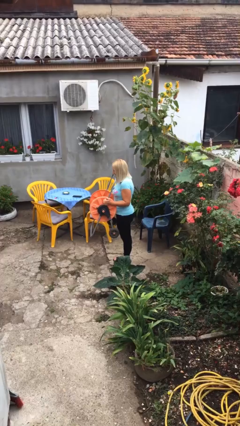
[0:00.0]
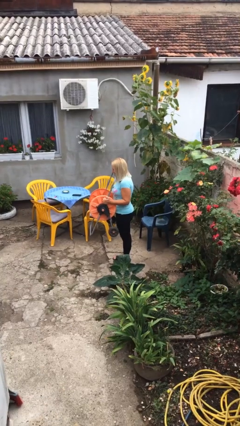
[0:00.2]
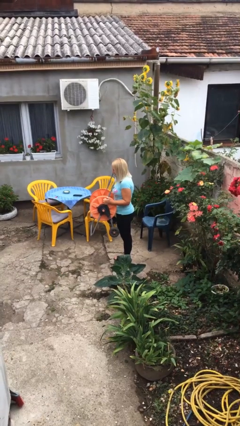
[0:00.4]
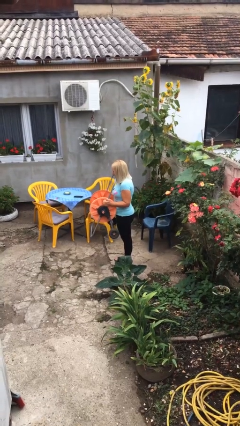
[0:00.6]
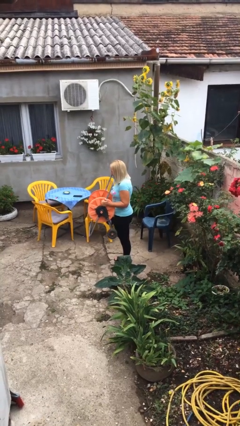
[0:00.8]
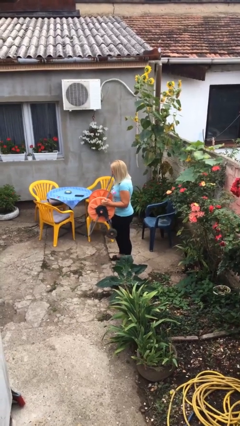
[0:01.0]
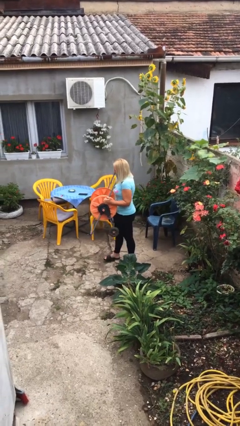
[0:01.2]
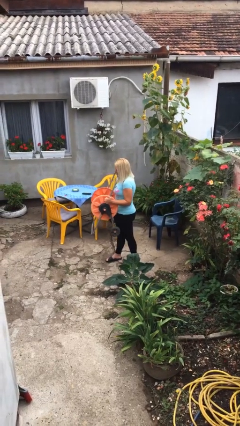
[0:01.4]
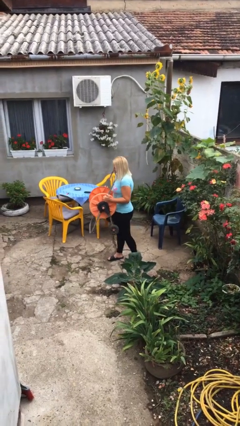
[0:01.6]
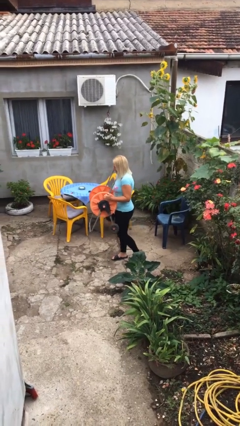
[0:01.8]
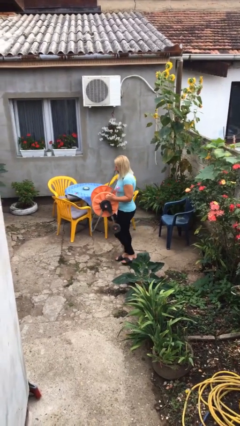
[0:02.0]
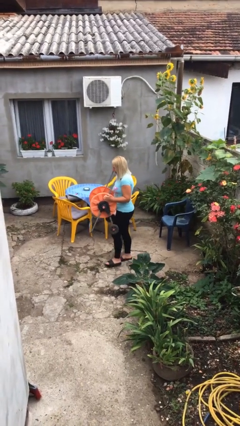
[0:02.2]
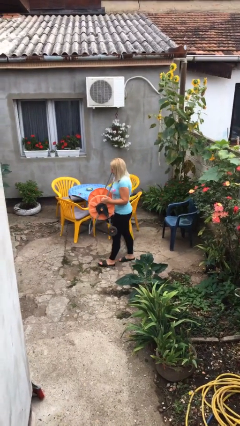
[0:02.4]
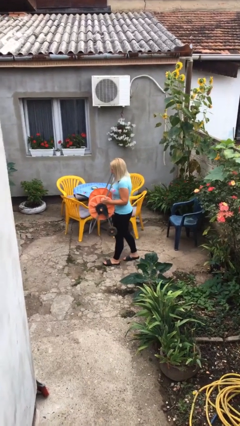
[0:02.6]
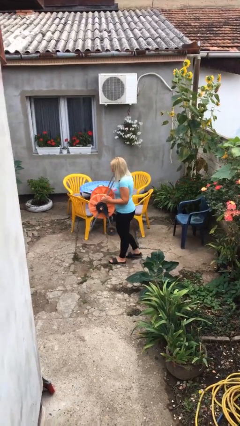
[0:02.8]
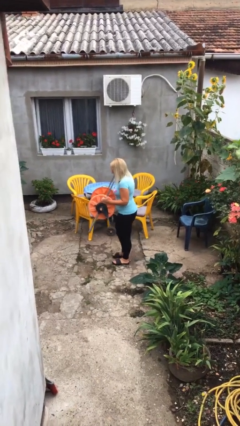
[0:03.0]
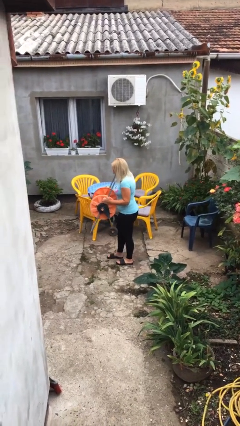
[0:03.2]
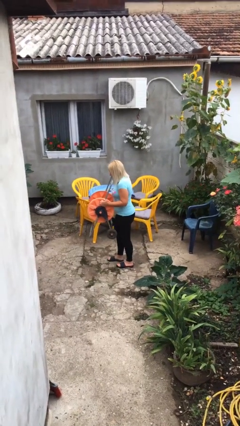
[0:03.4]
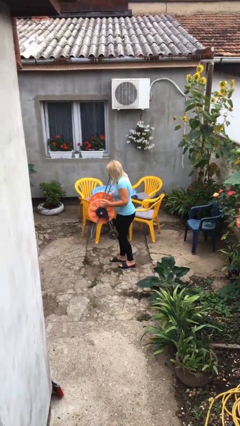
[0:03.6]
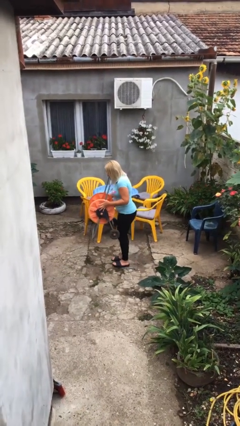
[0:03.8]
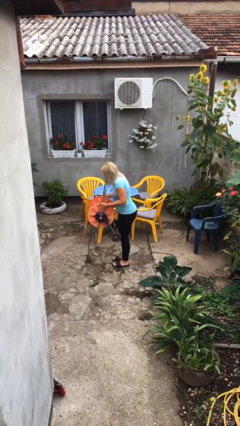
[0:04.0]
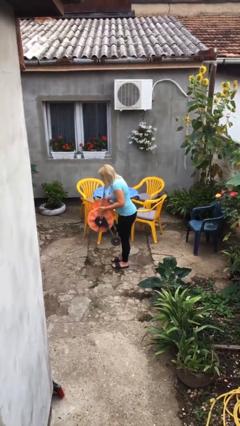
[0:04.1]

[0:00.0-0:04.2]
person carries heavy object

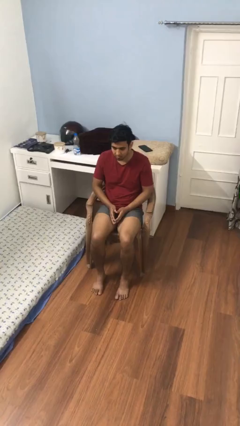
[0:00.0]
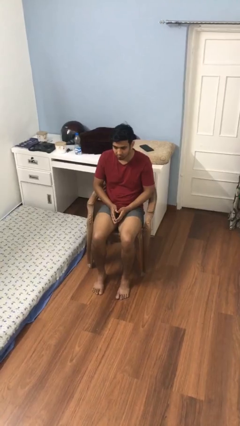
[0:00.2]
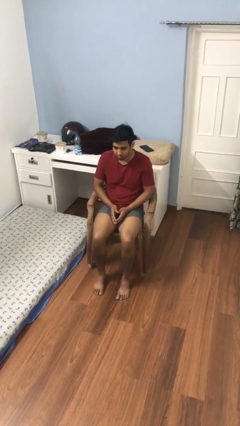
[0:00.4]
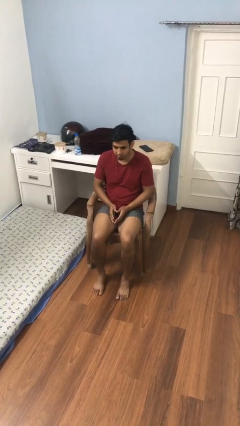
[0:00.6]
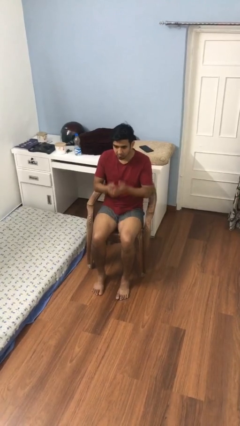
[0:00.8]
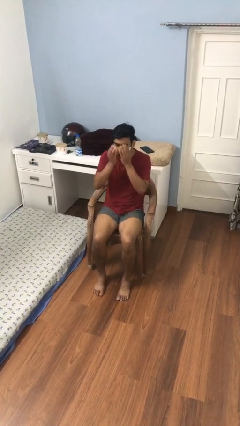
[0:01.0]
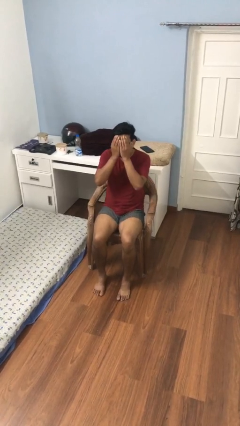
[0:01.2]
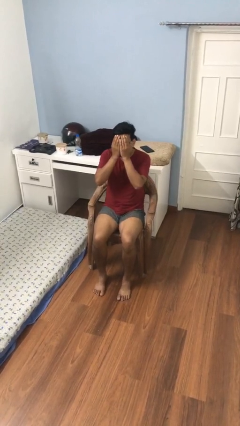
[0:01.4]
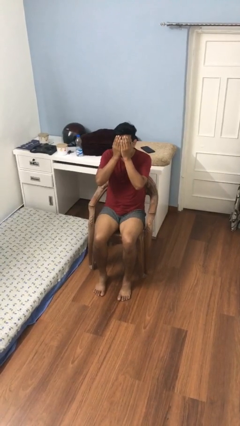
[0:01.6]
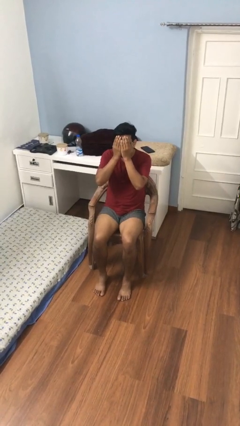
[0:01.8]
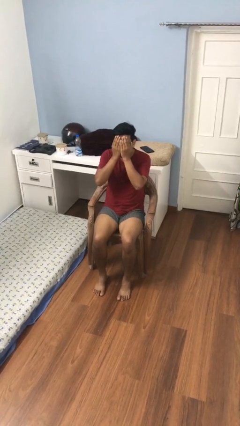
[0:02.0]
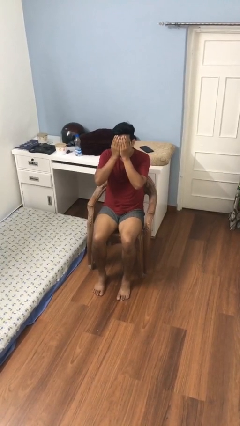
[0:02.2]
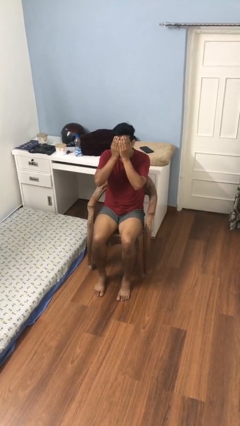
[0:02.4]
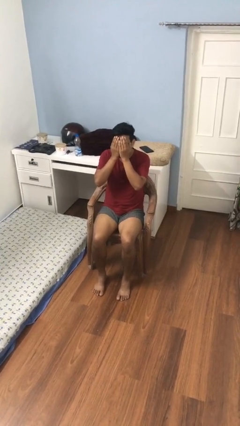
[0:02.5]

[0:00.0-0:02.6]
person covers face with hands

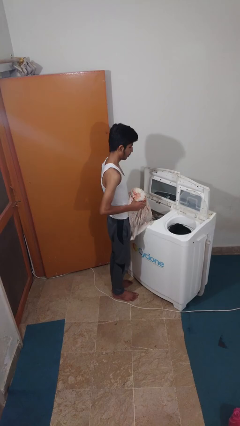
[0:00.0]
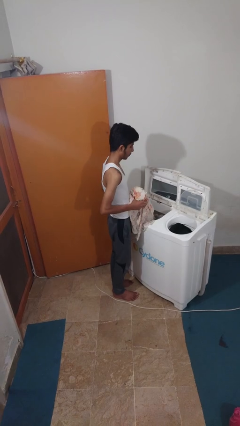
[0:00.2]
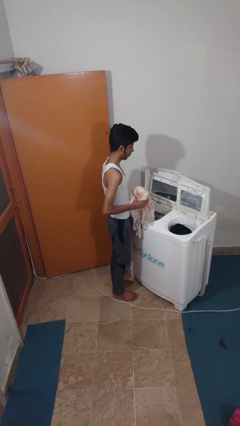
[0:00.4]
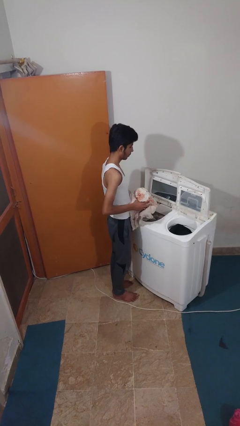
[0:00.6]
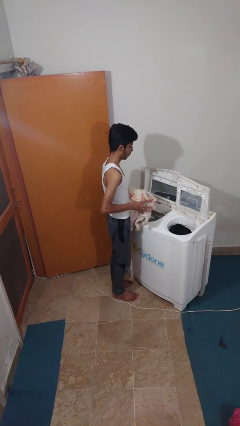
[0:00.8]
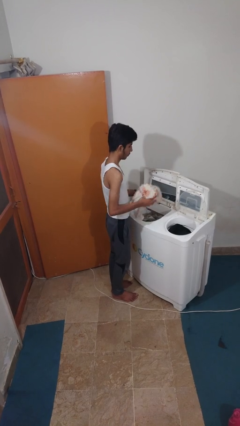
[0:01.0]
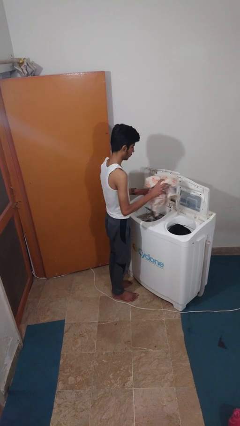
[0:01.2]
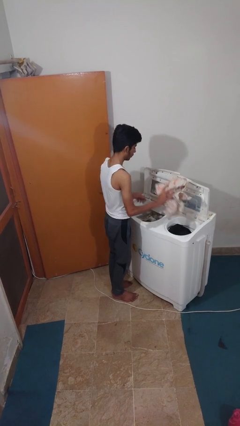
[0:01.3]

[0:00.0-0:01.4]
person loads dryer

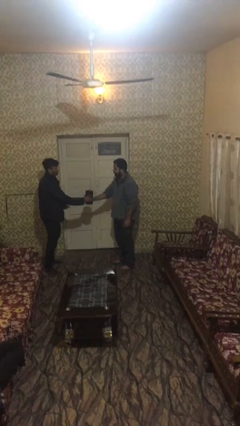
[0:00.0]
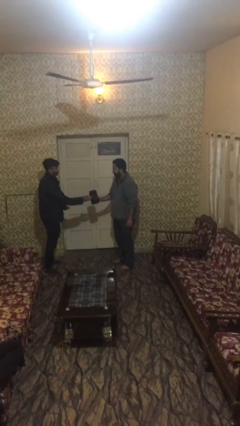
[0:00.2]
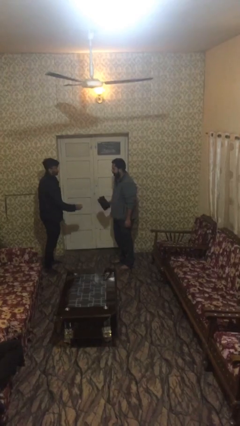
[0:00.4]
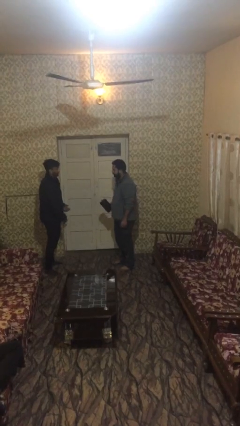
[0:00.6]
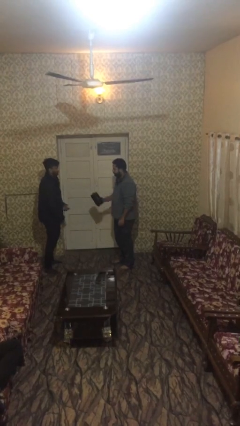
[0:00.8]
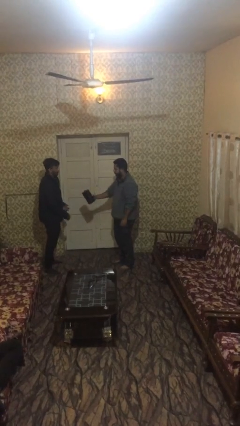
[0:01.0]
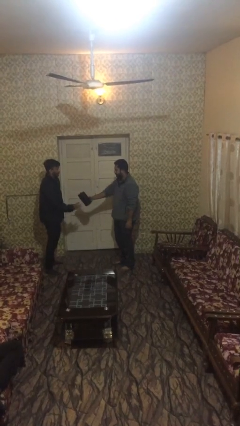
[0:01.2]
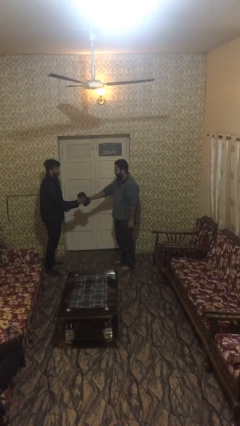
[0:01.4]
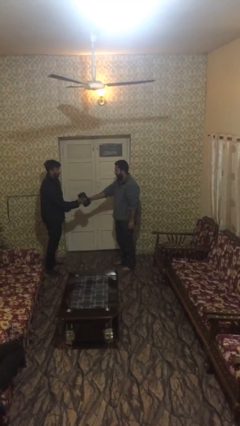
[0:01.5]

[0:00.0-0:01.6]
person transfers object to person

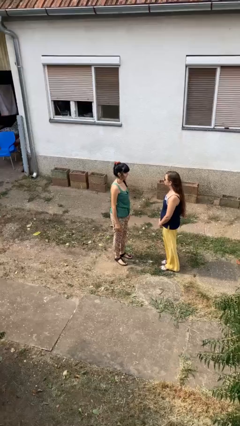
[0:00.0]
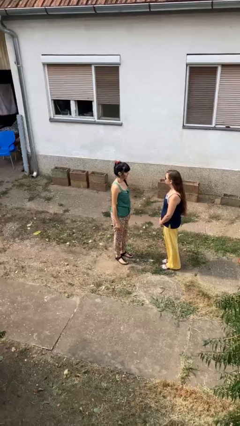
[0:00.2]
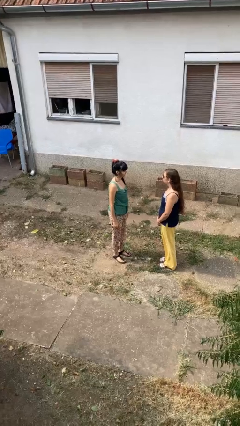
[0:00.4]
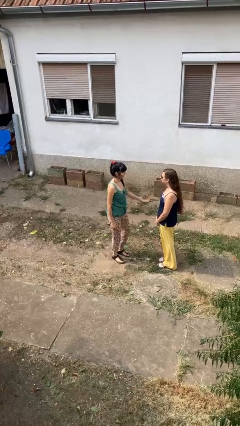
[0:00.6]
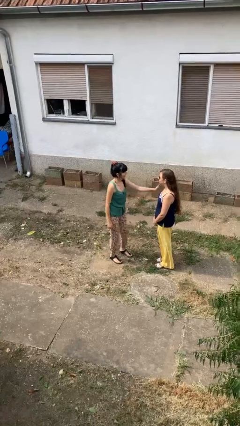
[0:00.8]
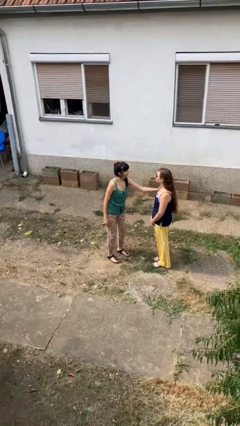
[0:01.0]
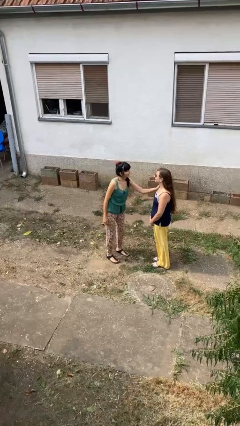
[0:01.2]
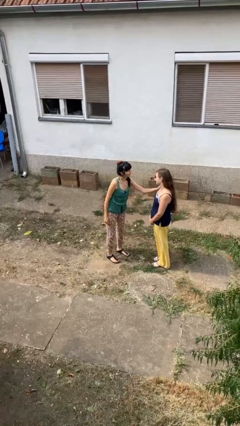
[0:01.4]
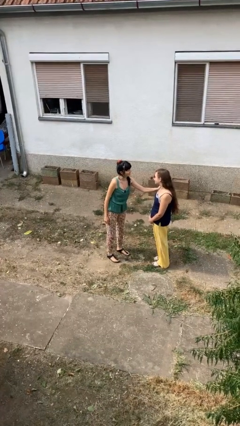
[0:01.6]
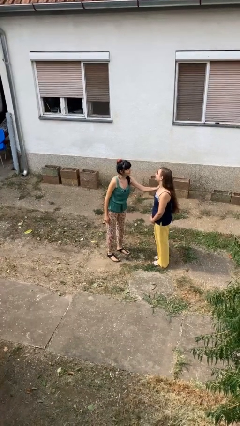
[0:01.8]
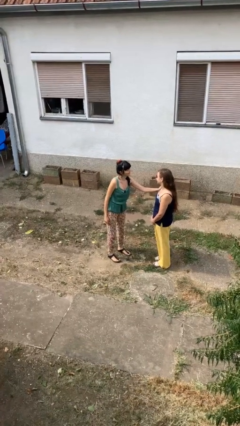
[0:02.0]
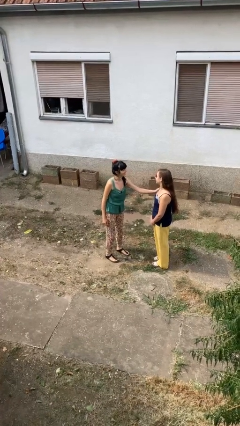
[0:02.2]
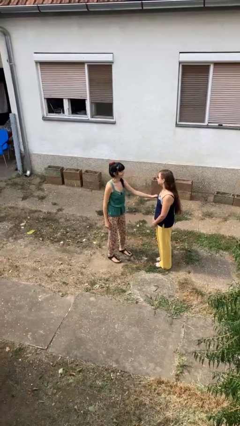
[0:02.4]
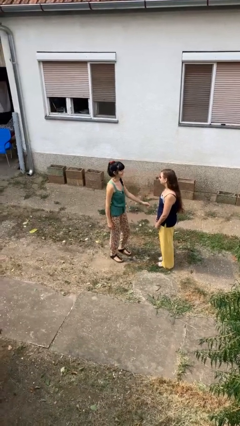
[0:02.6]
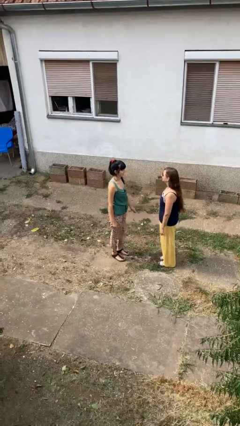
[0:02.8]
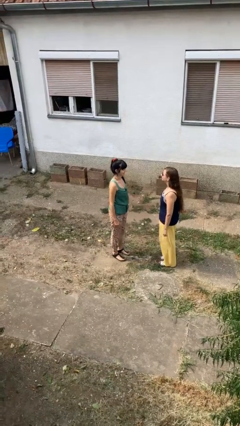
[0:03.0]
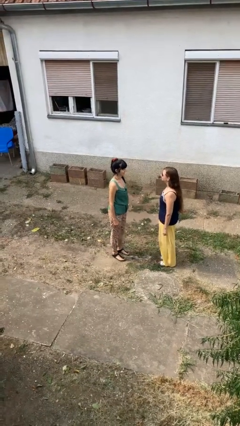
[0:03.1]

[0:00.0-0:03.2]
person pounds shoulders of person

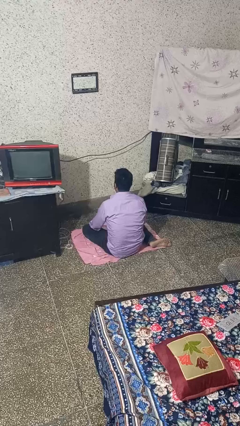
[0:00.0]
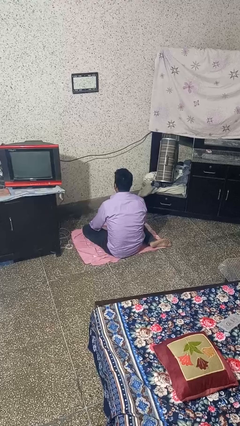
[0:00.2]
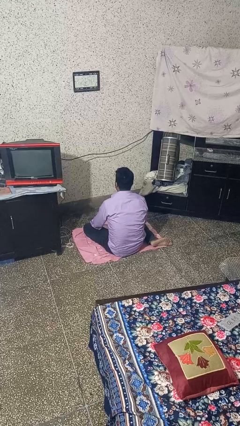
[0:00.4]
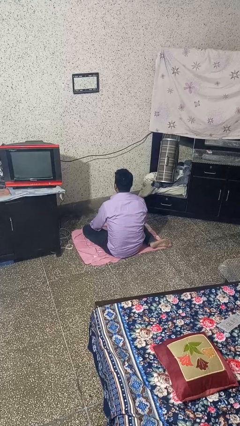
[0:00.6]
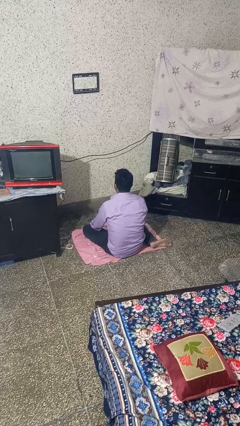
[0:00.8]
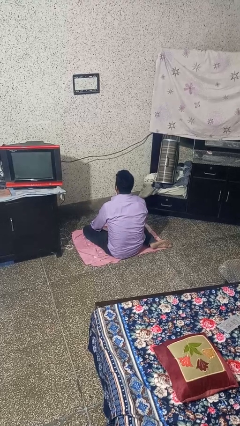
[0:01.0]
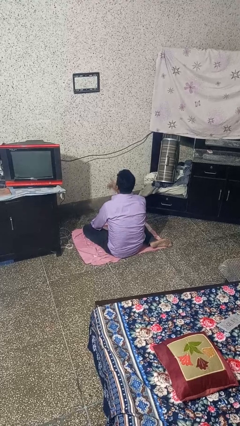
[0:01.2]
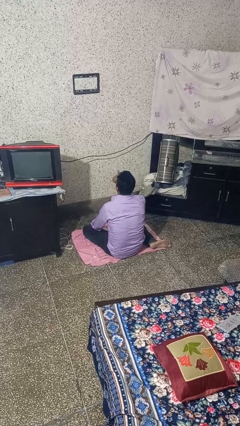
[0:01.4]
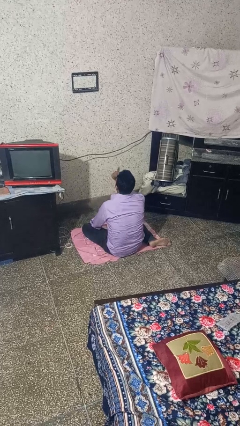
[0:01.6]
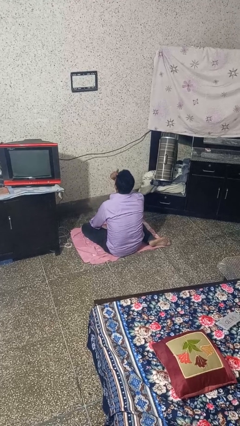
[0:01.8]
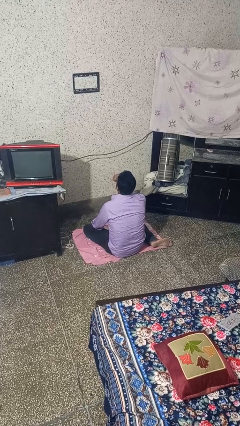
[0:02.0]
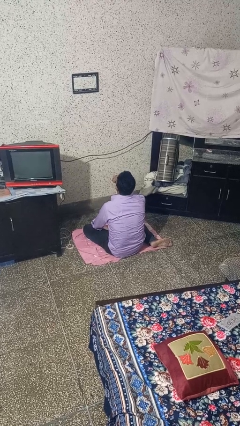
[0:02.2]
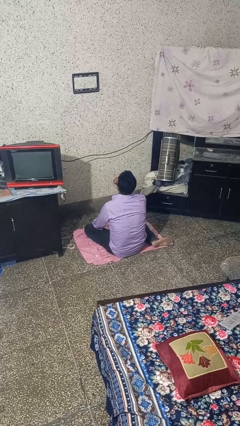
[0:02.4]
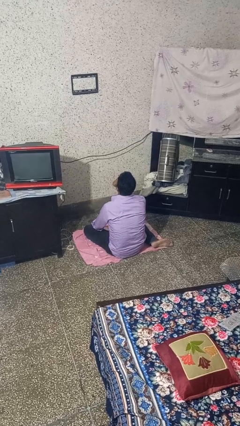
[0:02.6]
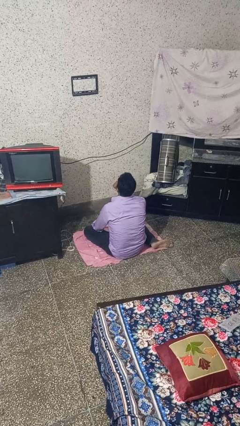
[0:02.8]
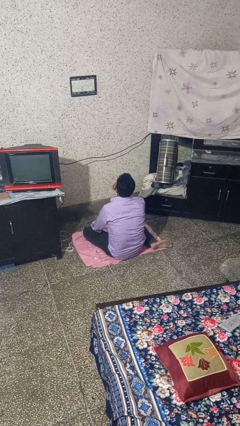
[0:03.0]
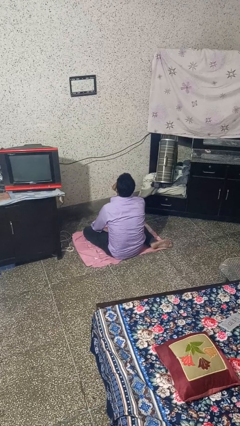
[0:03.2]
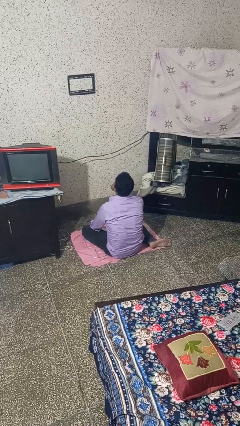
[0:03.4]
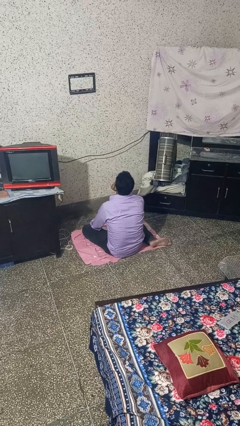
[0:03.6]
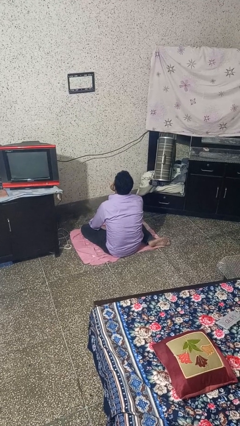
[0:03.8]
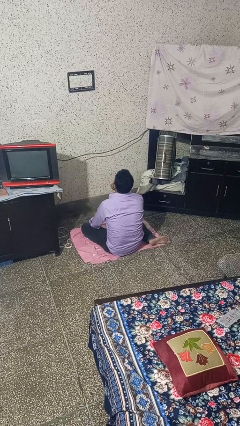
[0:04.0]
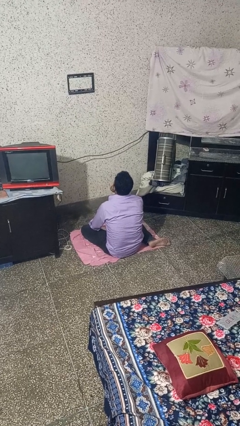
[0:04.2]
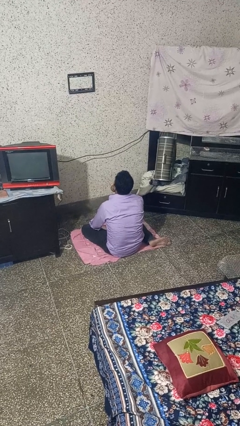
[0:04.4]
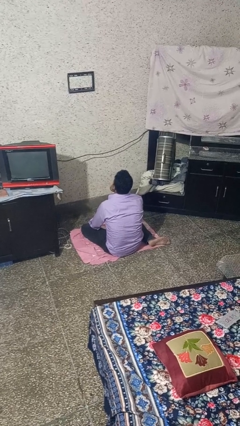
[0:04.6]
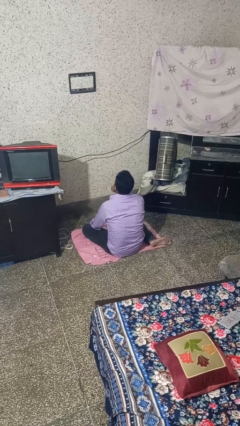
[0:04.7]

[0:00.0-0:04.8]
person licks fingers
